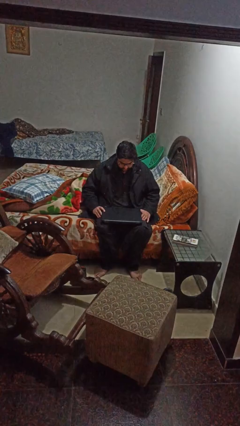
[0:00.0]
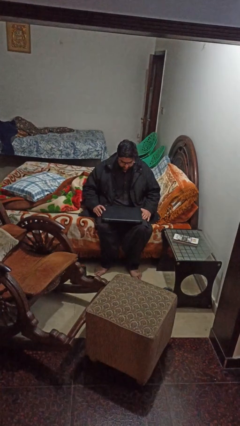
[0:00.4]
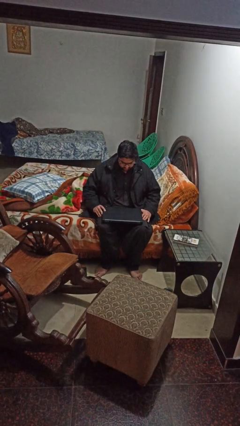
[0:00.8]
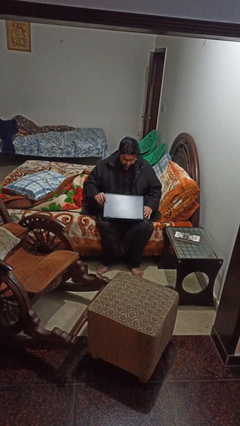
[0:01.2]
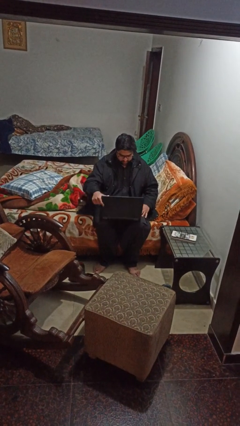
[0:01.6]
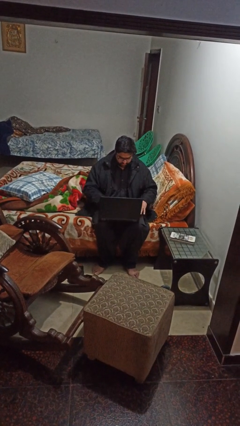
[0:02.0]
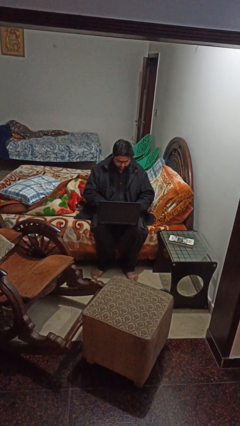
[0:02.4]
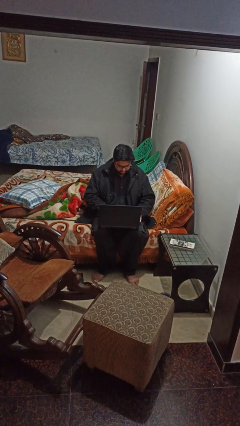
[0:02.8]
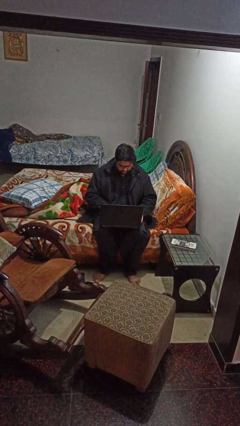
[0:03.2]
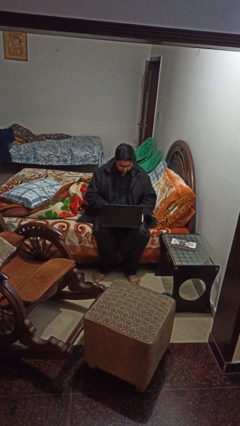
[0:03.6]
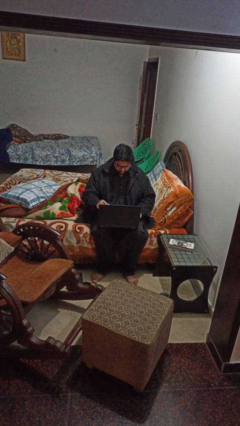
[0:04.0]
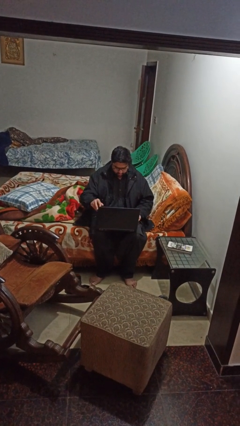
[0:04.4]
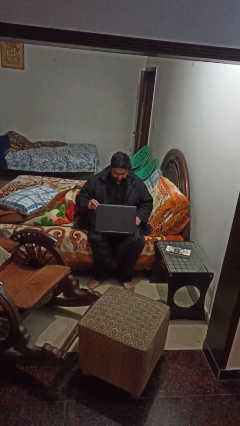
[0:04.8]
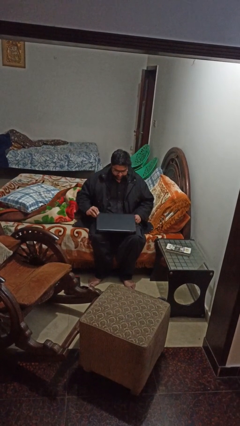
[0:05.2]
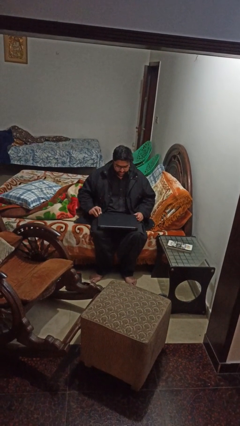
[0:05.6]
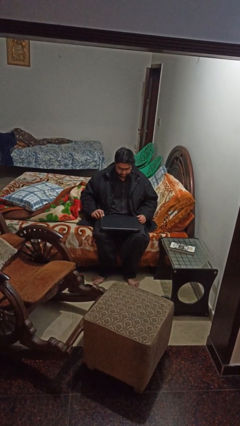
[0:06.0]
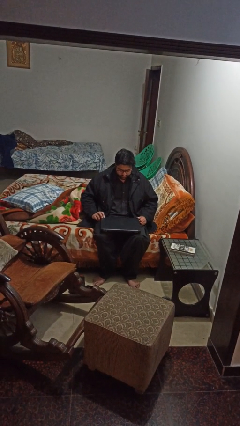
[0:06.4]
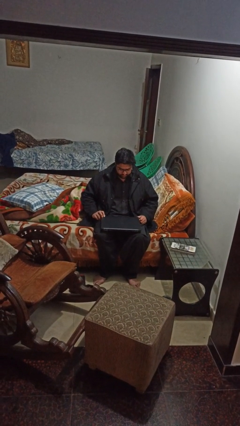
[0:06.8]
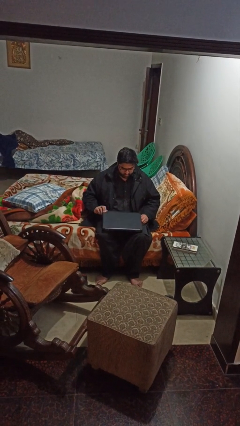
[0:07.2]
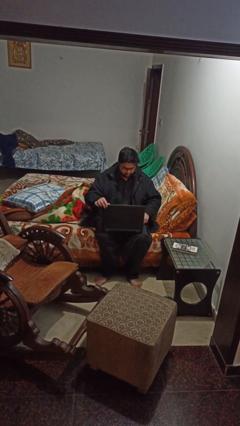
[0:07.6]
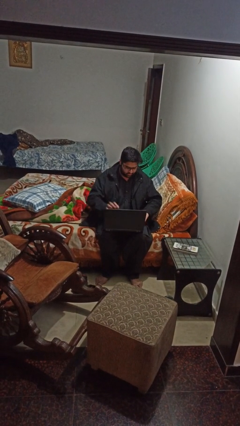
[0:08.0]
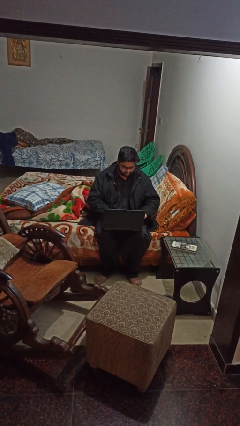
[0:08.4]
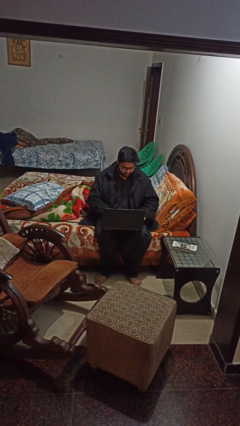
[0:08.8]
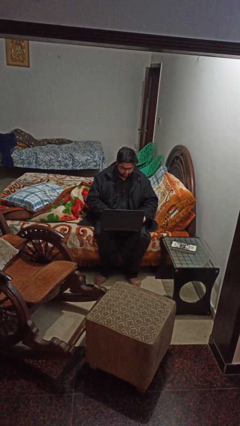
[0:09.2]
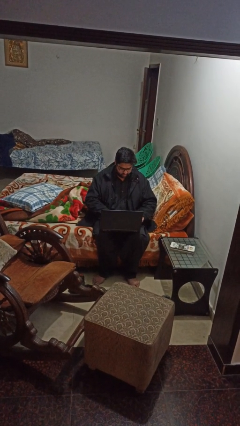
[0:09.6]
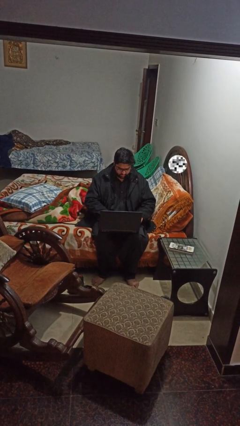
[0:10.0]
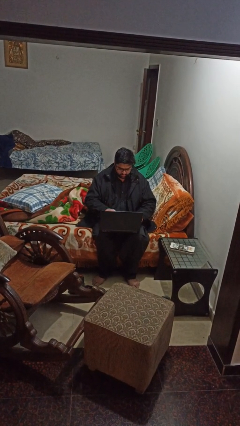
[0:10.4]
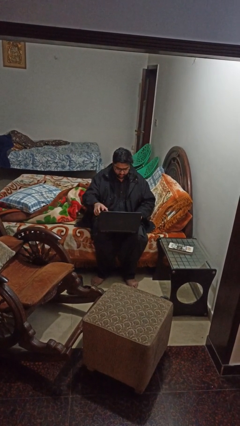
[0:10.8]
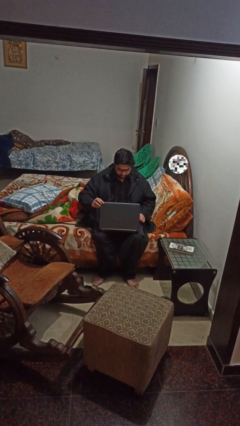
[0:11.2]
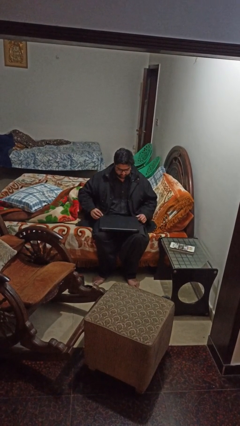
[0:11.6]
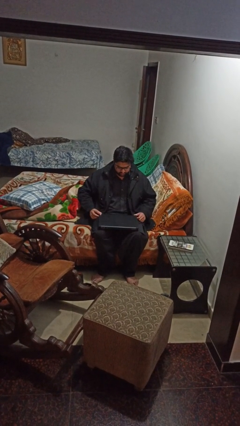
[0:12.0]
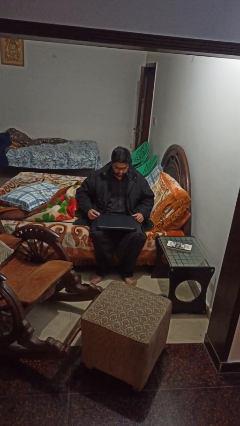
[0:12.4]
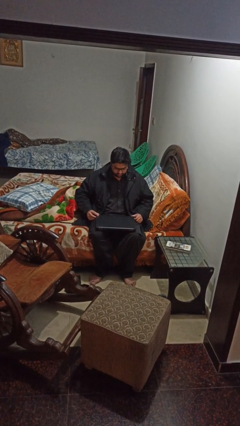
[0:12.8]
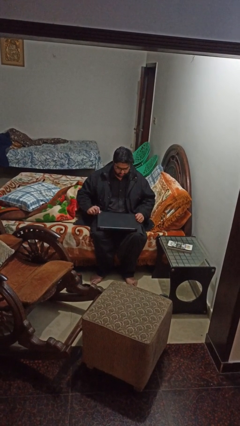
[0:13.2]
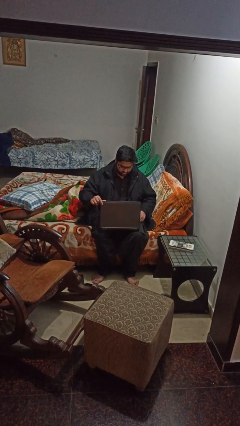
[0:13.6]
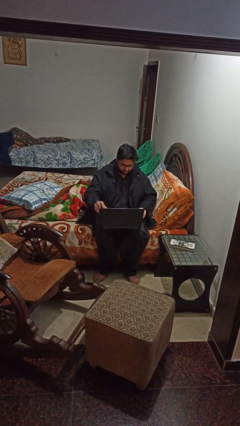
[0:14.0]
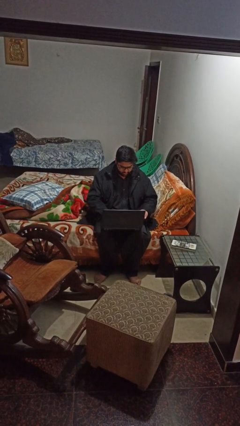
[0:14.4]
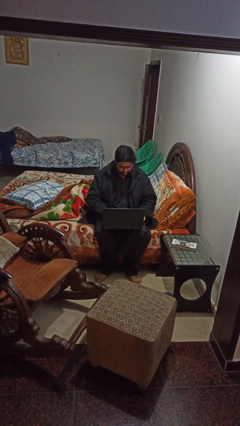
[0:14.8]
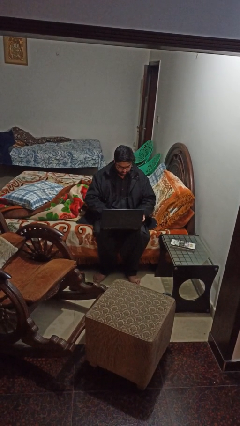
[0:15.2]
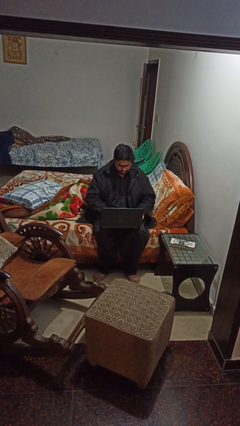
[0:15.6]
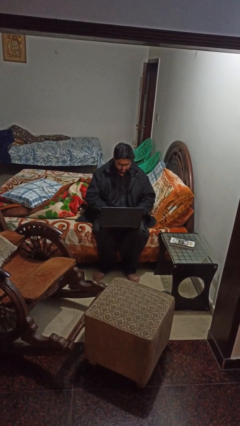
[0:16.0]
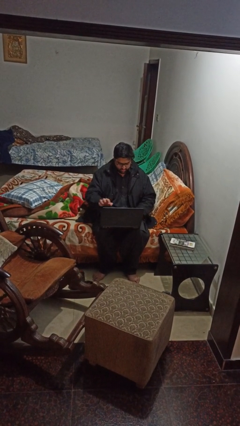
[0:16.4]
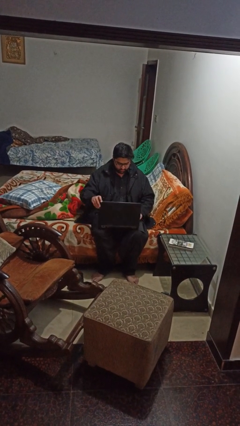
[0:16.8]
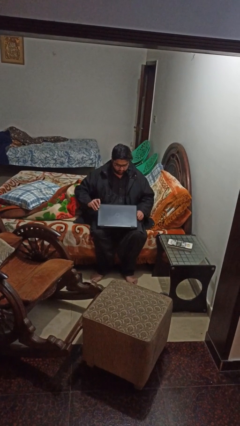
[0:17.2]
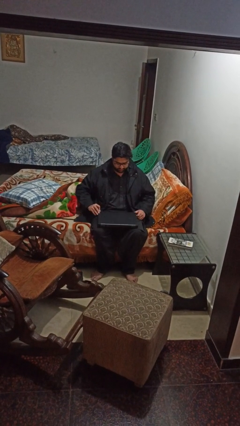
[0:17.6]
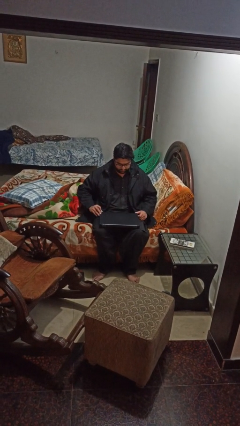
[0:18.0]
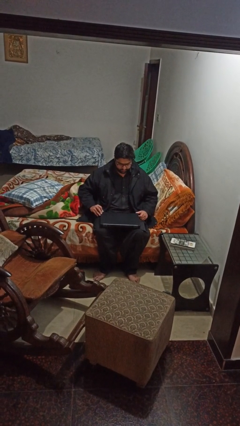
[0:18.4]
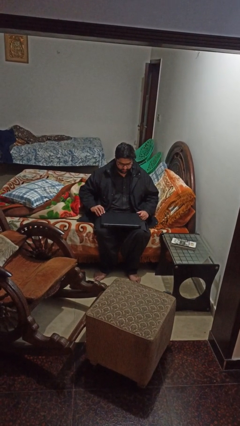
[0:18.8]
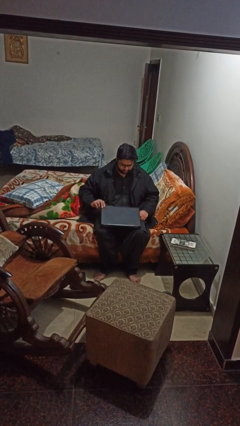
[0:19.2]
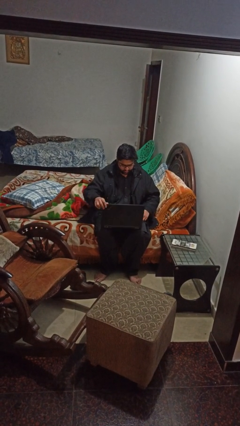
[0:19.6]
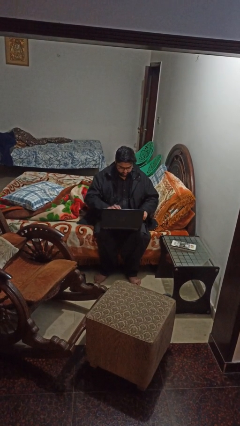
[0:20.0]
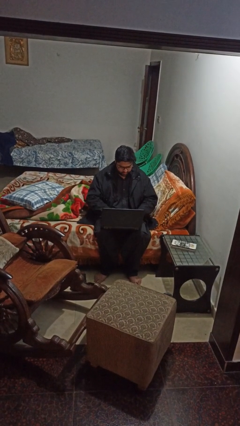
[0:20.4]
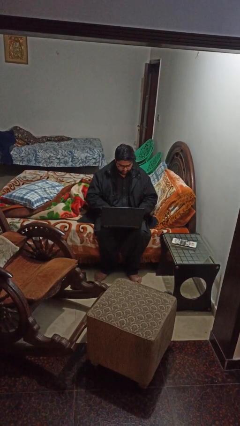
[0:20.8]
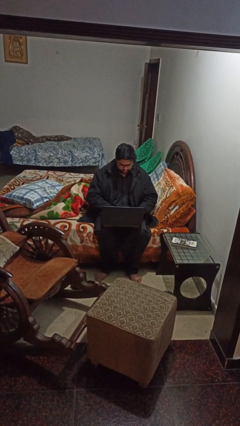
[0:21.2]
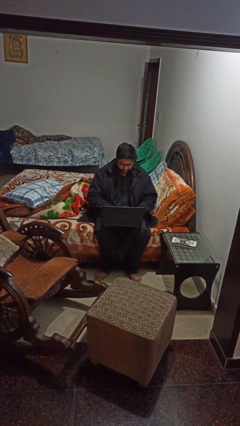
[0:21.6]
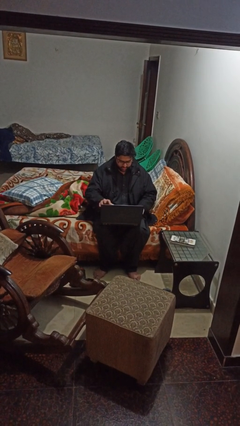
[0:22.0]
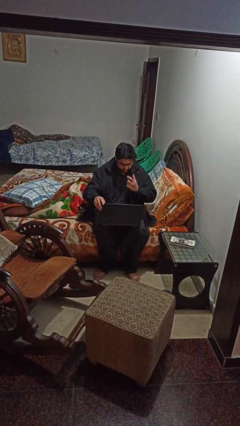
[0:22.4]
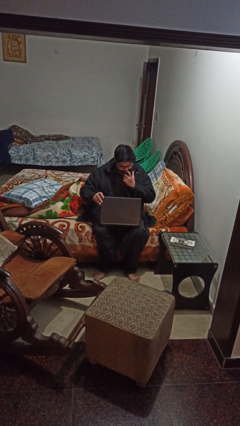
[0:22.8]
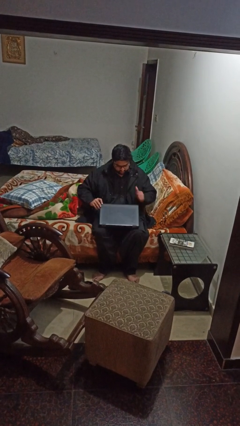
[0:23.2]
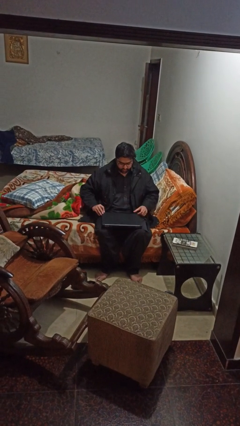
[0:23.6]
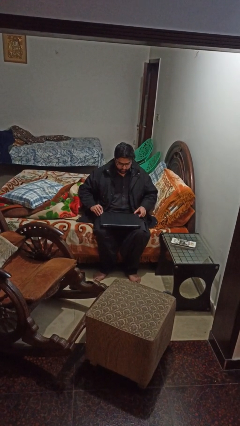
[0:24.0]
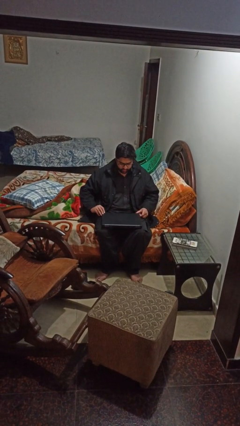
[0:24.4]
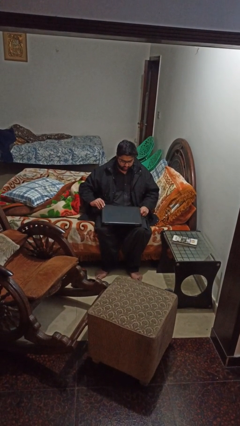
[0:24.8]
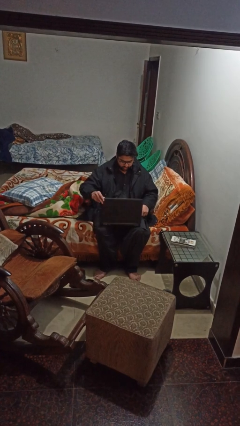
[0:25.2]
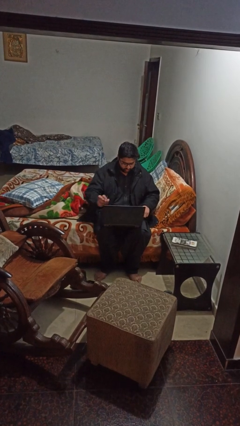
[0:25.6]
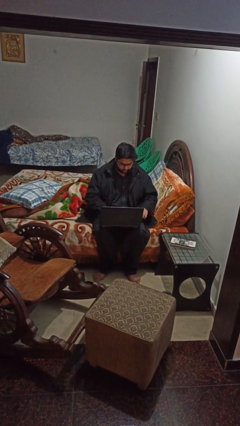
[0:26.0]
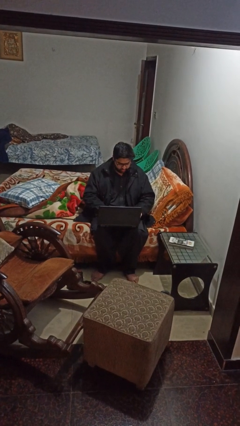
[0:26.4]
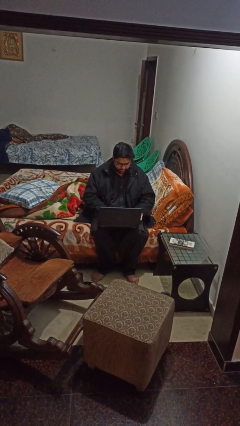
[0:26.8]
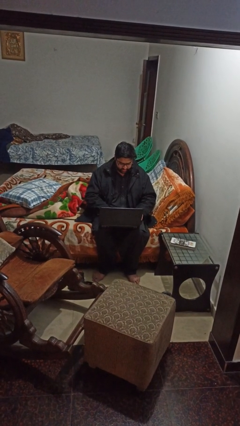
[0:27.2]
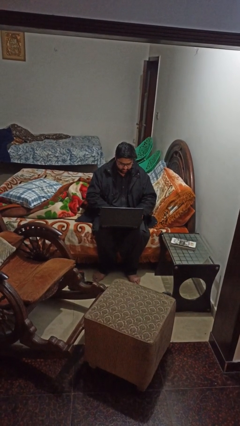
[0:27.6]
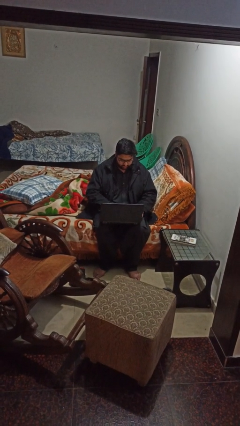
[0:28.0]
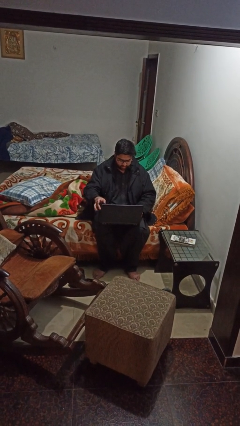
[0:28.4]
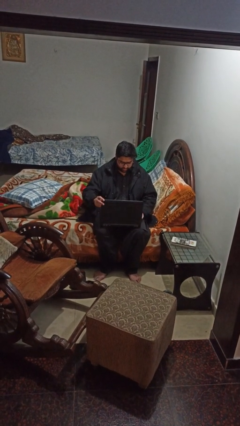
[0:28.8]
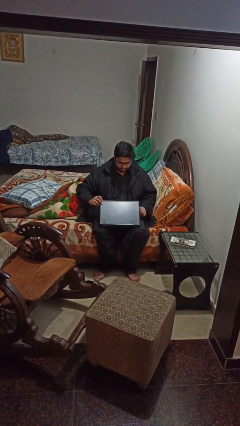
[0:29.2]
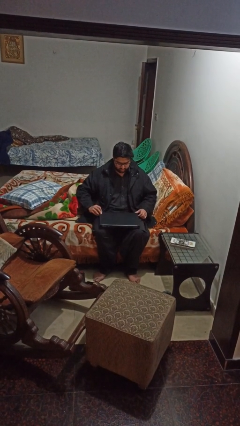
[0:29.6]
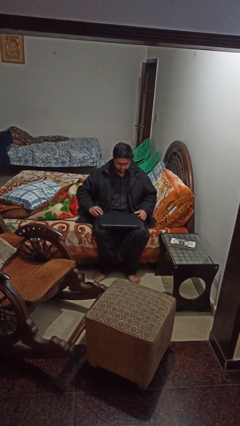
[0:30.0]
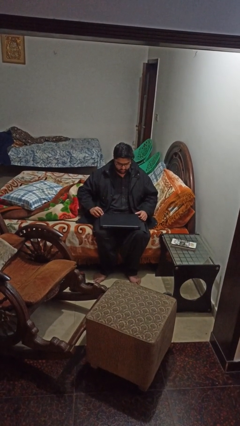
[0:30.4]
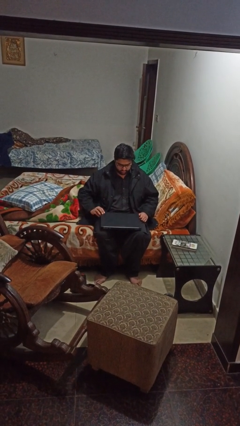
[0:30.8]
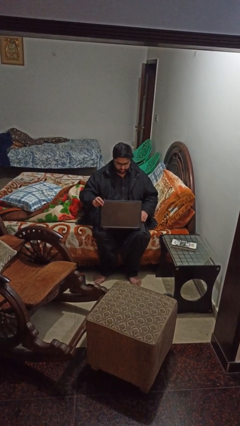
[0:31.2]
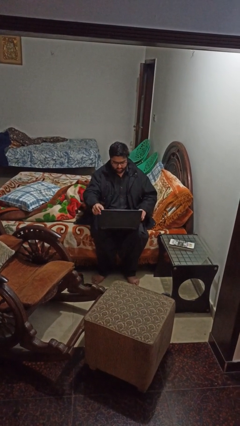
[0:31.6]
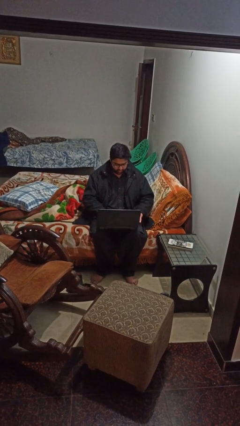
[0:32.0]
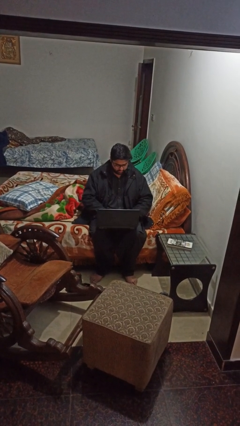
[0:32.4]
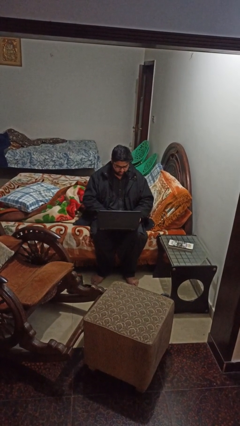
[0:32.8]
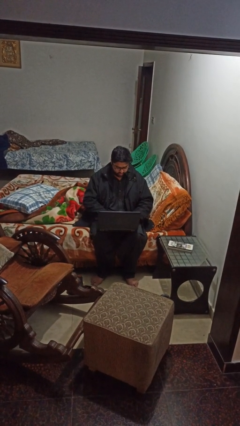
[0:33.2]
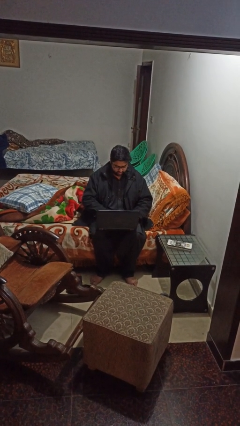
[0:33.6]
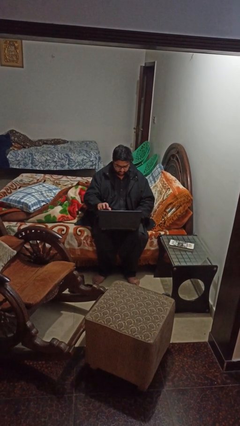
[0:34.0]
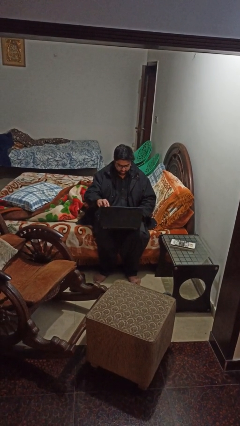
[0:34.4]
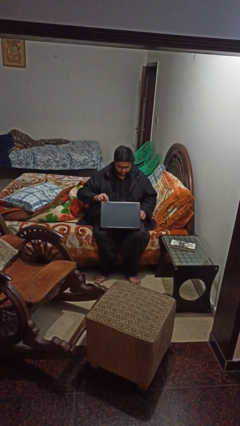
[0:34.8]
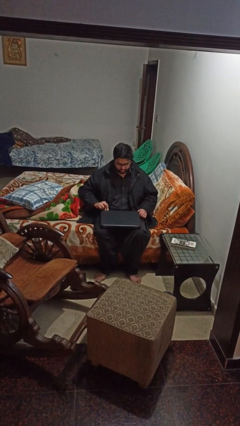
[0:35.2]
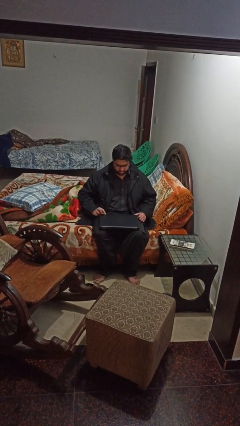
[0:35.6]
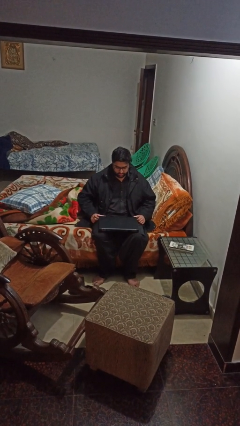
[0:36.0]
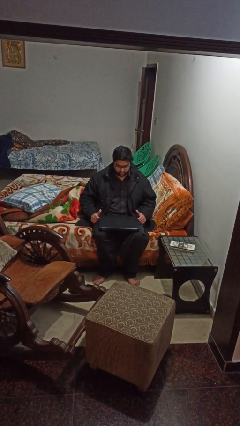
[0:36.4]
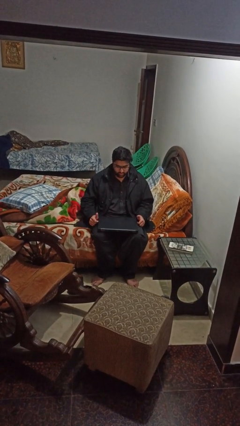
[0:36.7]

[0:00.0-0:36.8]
person interacts with laptop
